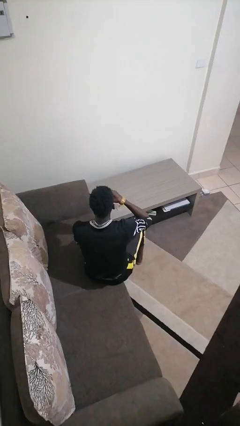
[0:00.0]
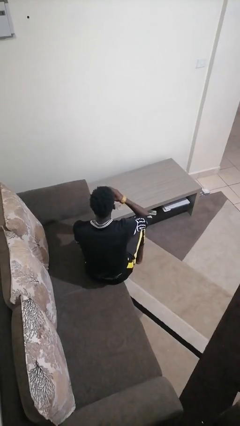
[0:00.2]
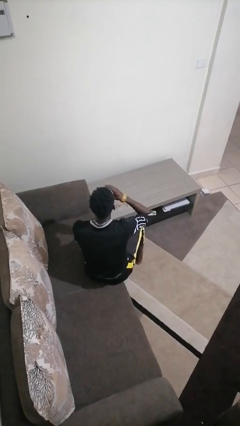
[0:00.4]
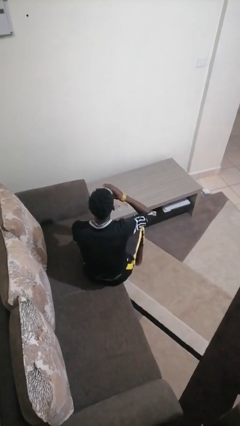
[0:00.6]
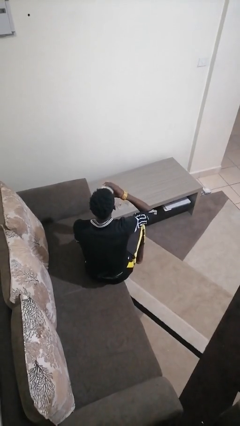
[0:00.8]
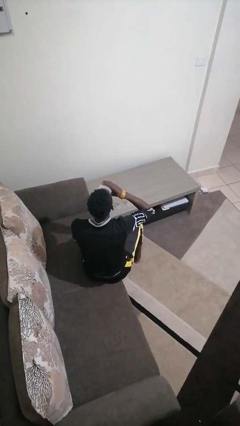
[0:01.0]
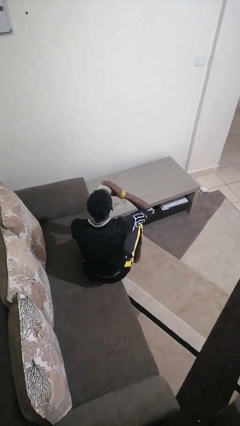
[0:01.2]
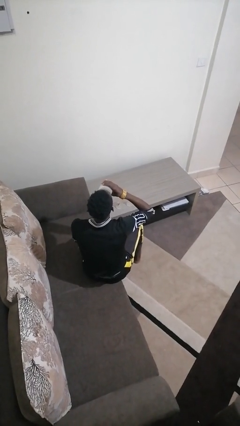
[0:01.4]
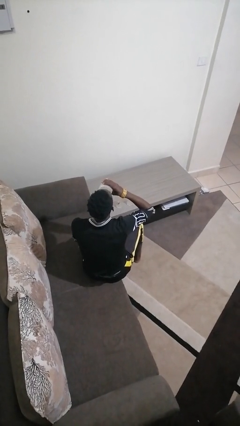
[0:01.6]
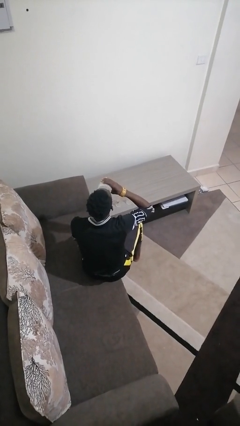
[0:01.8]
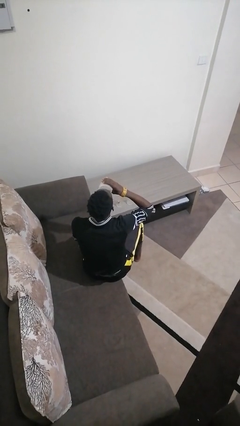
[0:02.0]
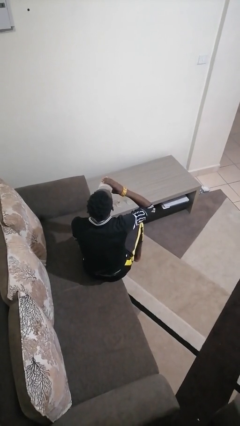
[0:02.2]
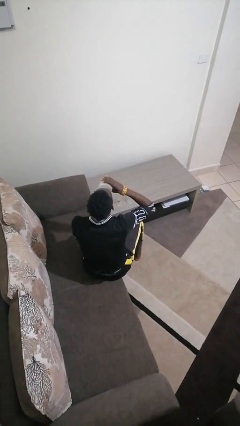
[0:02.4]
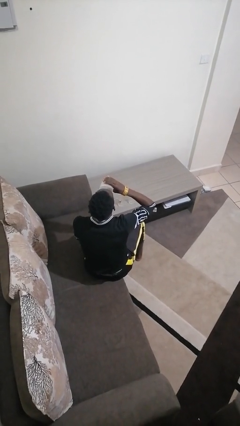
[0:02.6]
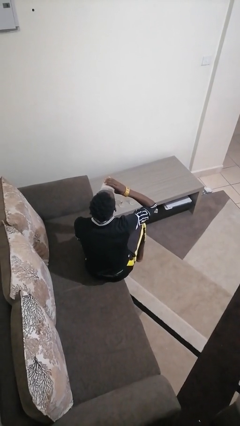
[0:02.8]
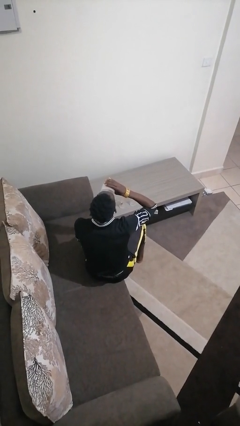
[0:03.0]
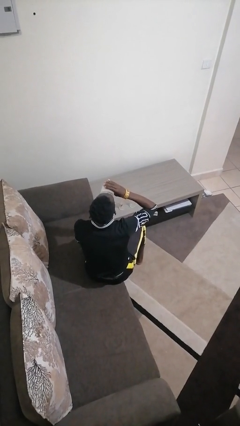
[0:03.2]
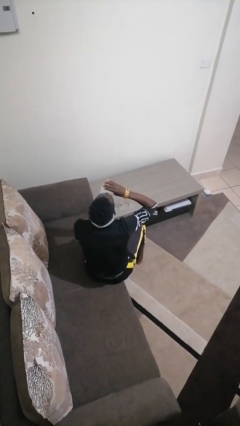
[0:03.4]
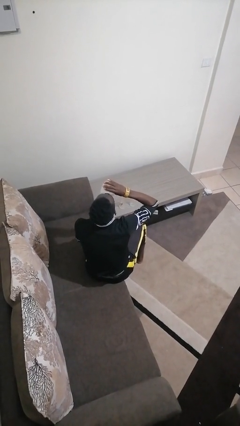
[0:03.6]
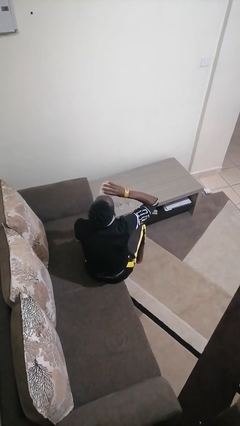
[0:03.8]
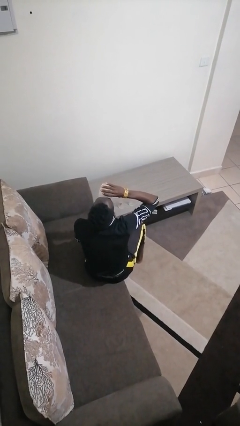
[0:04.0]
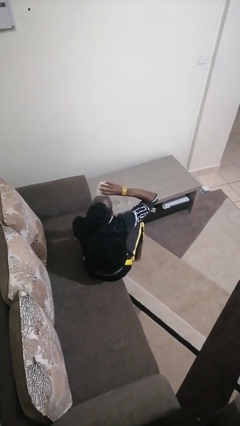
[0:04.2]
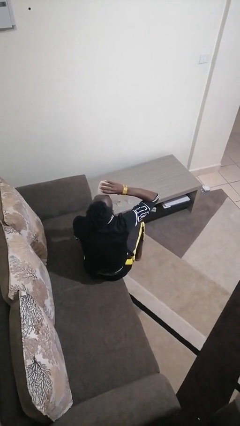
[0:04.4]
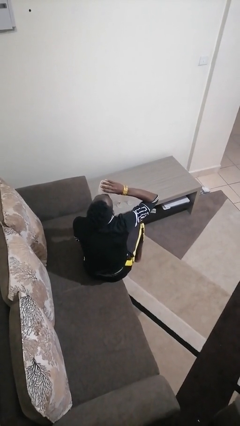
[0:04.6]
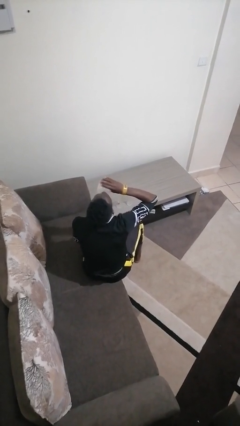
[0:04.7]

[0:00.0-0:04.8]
person drinks from shotglass

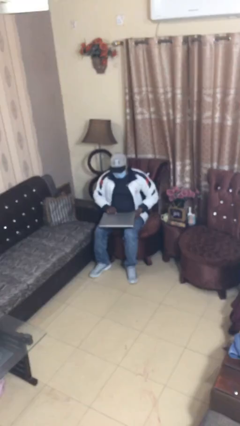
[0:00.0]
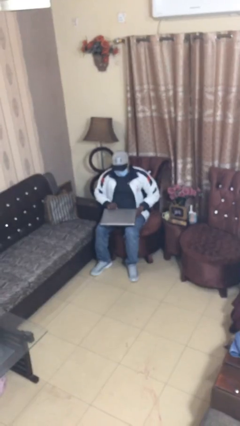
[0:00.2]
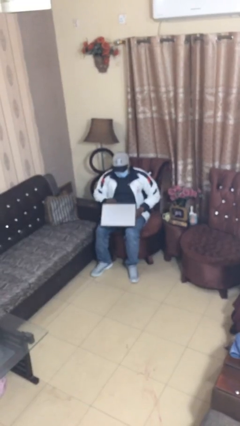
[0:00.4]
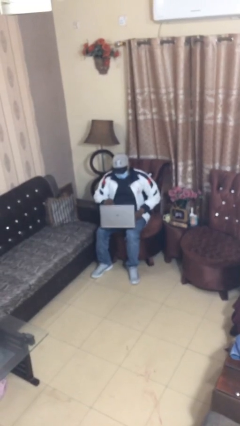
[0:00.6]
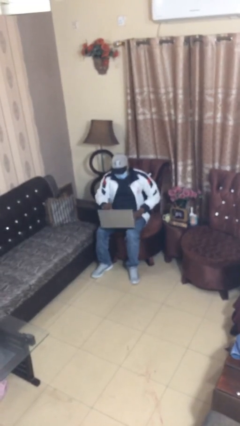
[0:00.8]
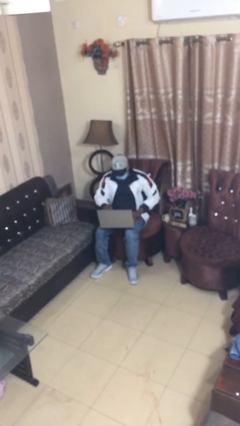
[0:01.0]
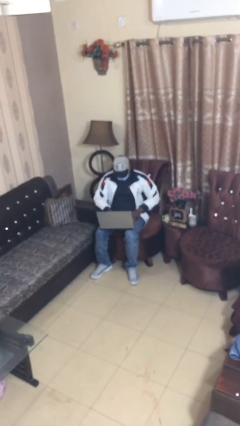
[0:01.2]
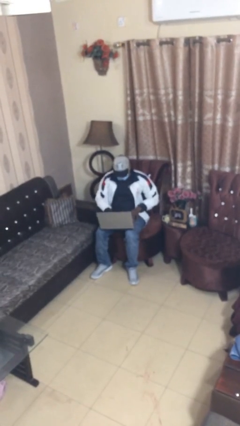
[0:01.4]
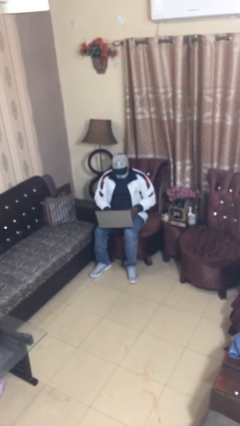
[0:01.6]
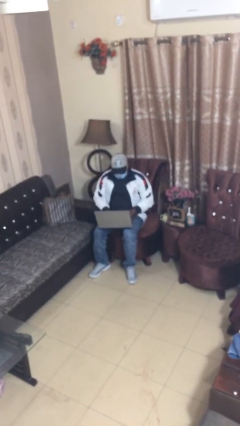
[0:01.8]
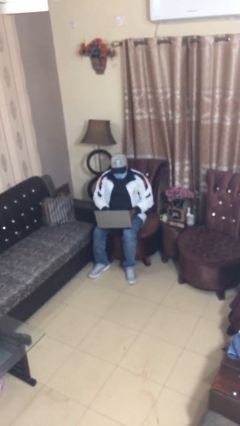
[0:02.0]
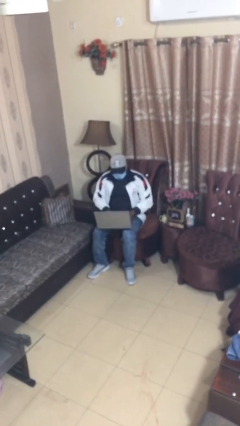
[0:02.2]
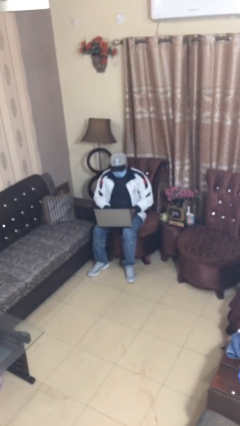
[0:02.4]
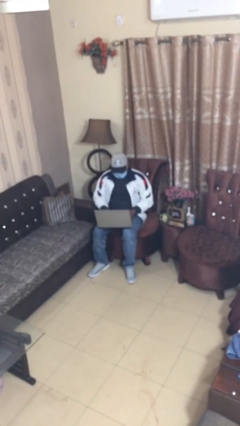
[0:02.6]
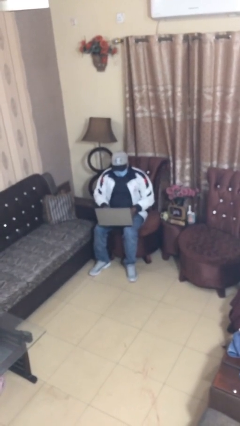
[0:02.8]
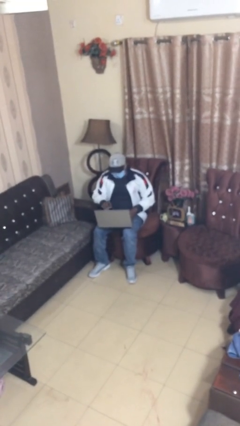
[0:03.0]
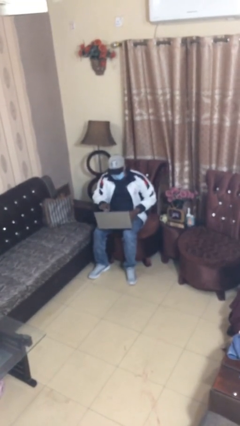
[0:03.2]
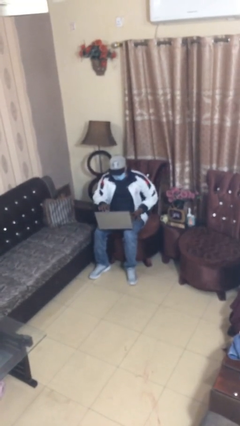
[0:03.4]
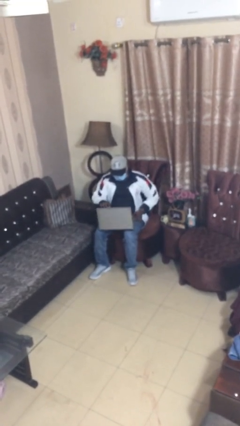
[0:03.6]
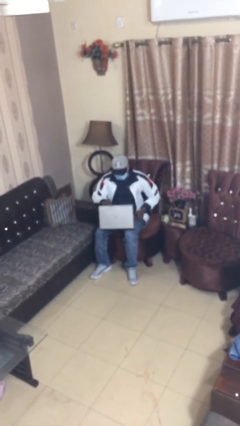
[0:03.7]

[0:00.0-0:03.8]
person interacts with laptop

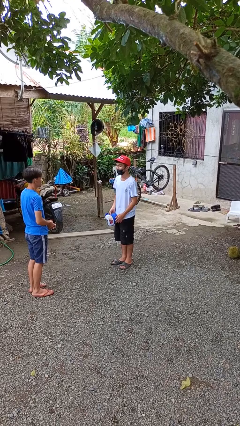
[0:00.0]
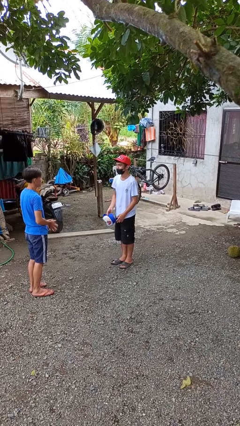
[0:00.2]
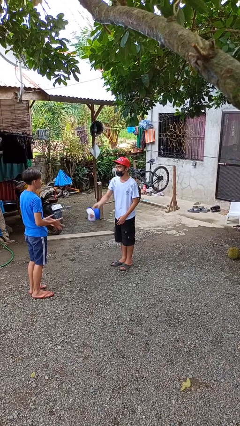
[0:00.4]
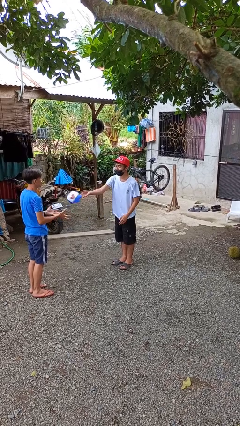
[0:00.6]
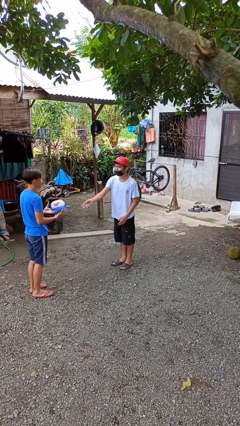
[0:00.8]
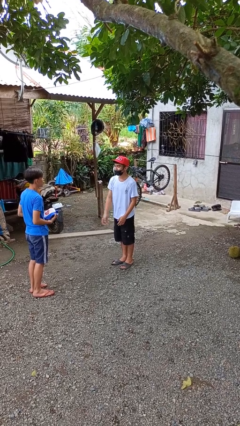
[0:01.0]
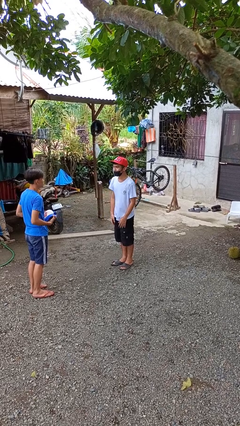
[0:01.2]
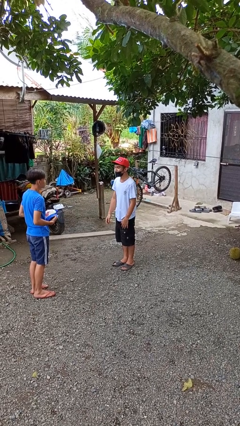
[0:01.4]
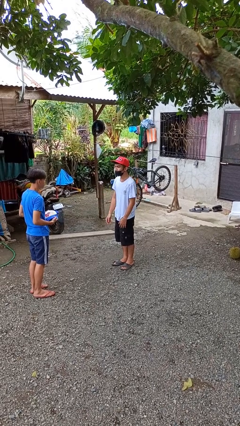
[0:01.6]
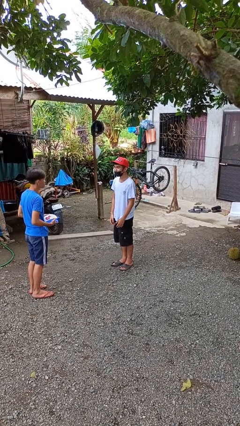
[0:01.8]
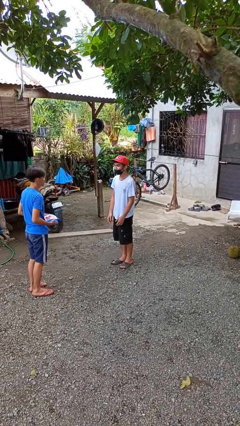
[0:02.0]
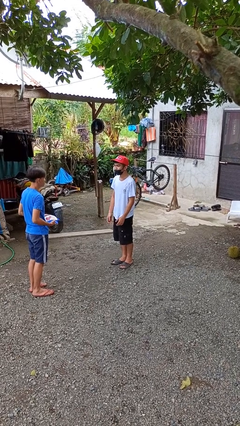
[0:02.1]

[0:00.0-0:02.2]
person throws object to person

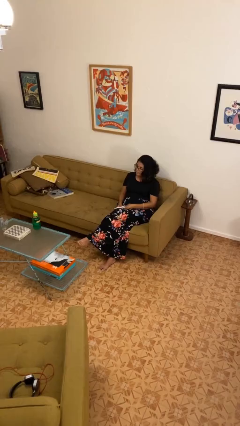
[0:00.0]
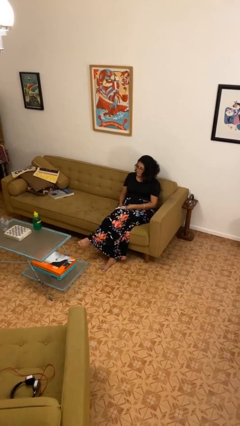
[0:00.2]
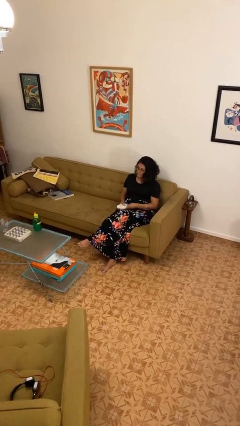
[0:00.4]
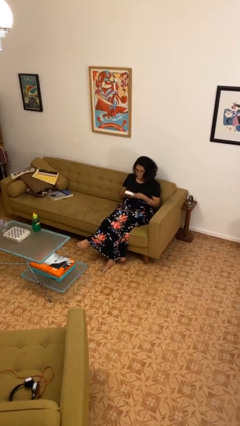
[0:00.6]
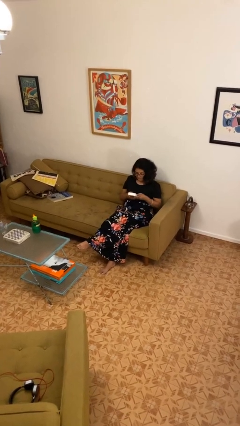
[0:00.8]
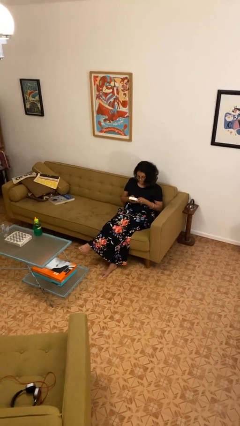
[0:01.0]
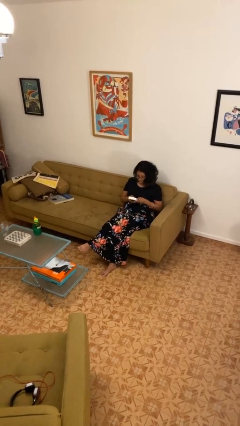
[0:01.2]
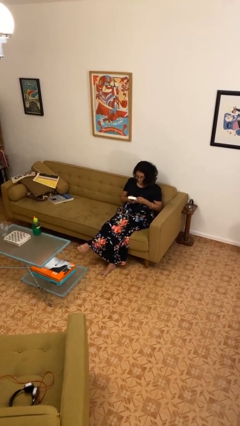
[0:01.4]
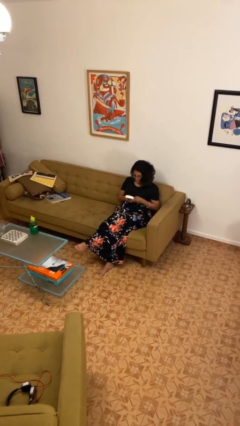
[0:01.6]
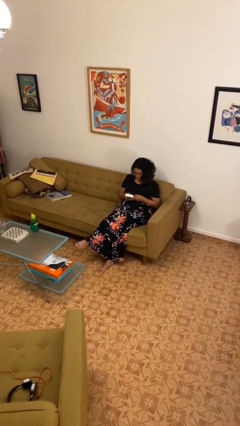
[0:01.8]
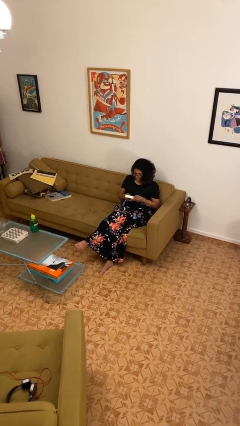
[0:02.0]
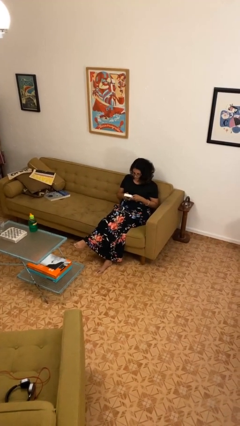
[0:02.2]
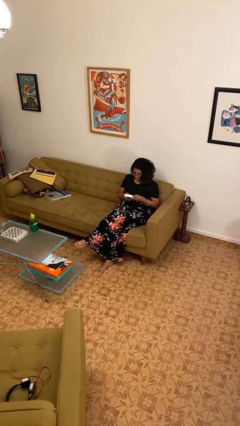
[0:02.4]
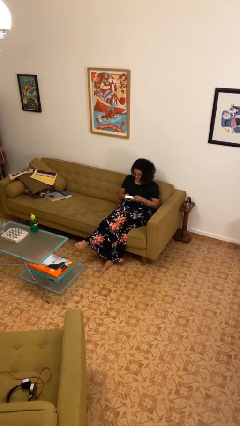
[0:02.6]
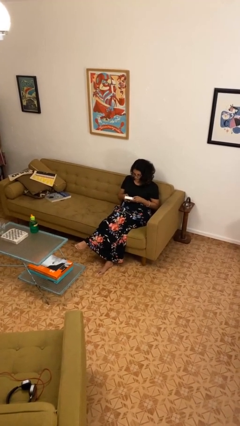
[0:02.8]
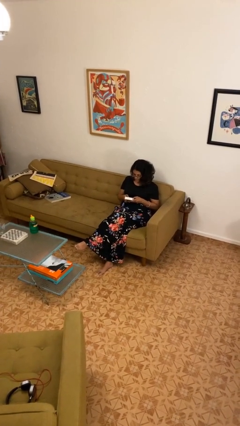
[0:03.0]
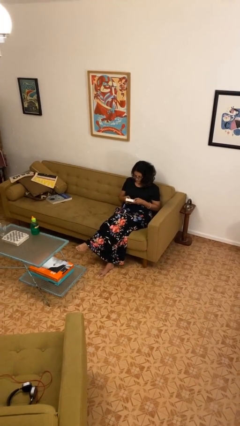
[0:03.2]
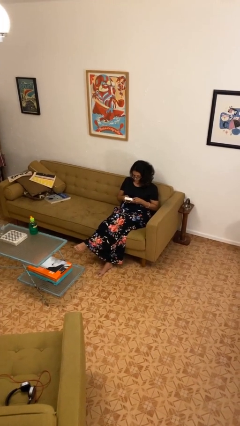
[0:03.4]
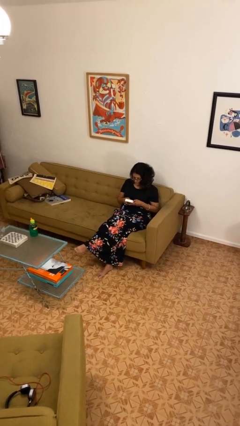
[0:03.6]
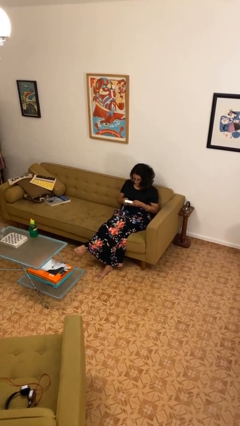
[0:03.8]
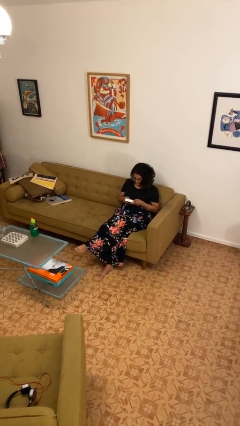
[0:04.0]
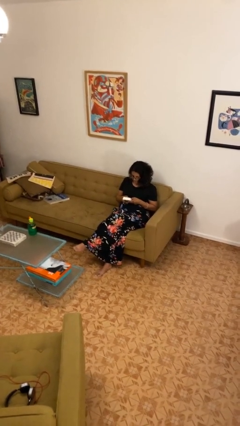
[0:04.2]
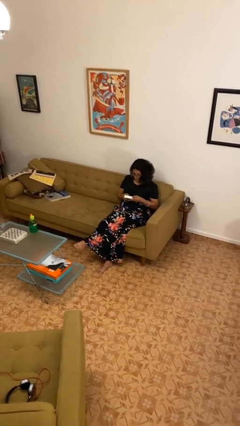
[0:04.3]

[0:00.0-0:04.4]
person interacts with handheld game

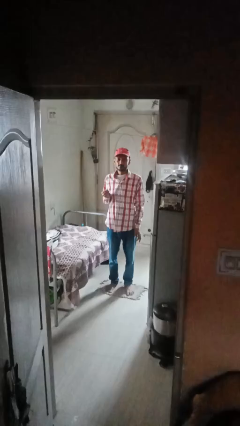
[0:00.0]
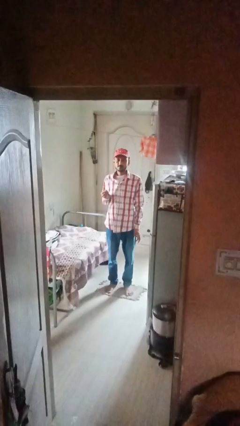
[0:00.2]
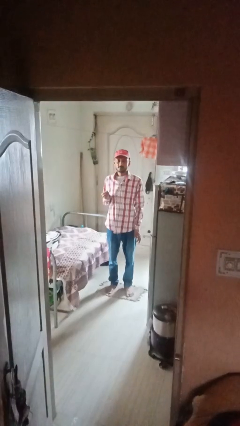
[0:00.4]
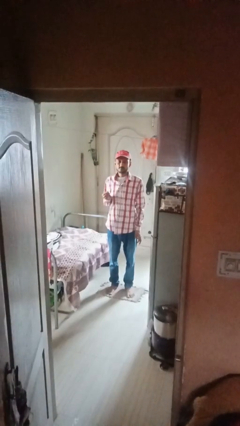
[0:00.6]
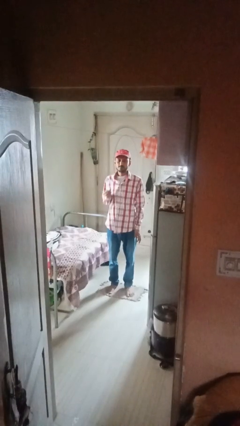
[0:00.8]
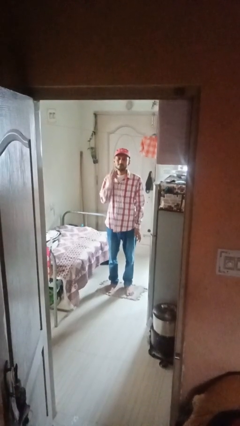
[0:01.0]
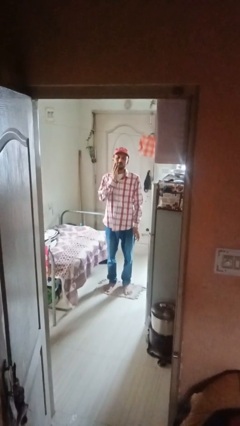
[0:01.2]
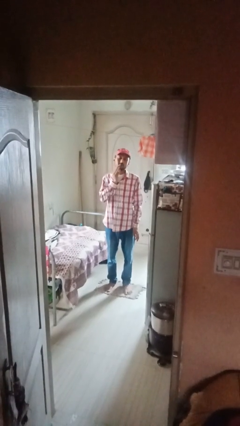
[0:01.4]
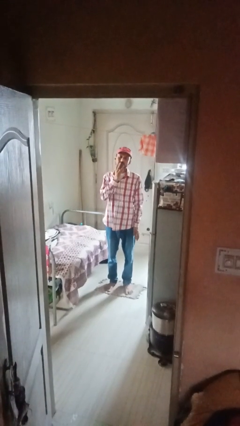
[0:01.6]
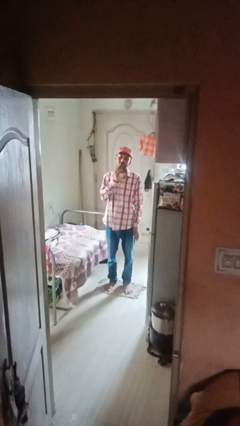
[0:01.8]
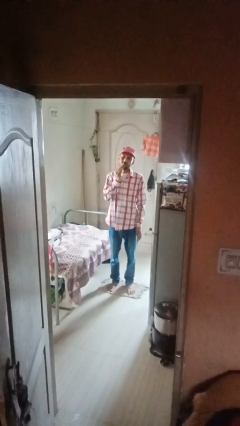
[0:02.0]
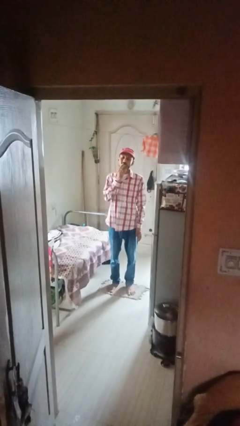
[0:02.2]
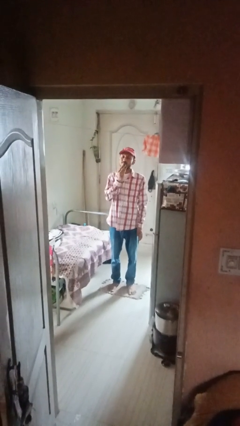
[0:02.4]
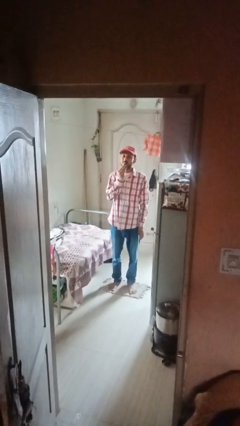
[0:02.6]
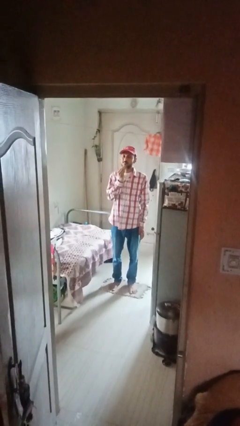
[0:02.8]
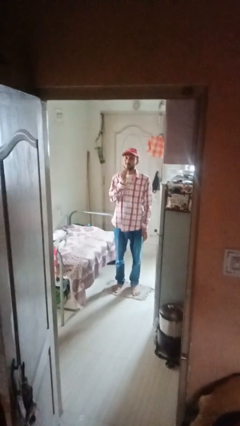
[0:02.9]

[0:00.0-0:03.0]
person strokes chin
